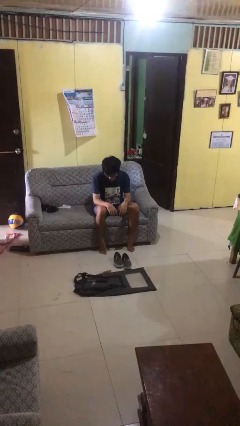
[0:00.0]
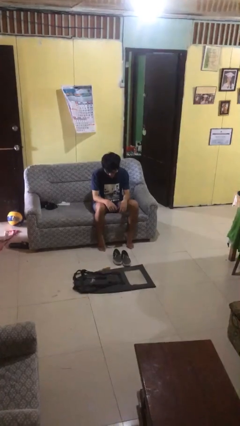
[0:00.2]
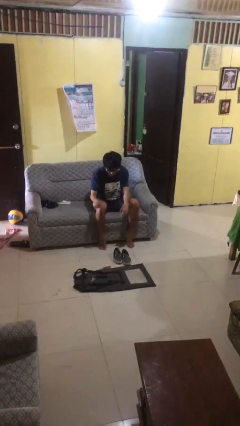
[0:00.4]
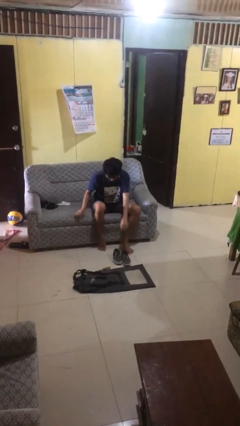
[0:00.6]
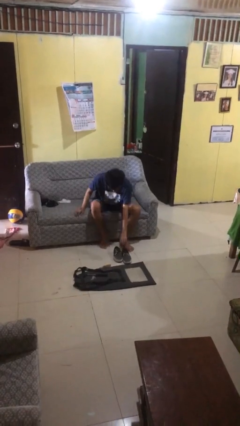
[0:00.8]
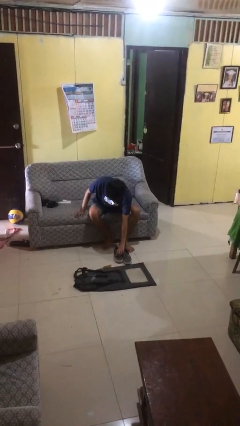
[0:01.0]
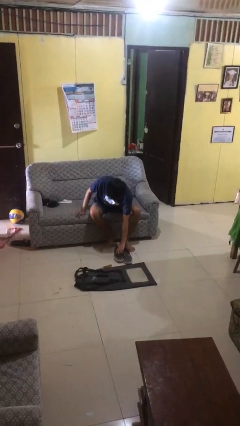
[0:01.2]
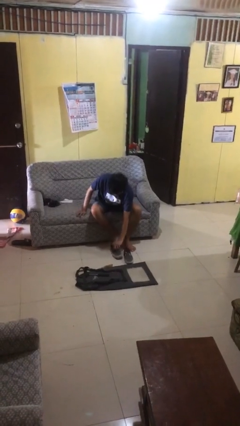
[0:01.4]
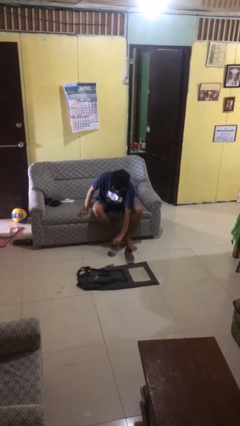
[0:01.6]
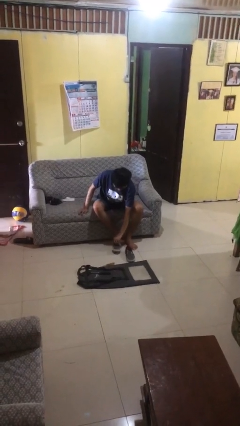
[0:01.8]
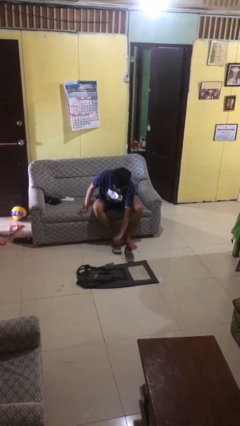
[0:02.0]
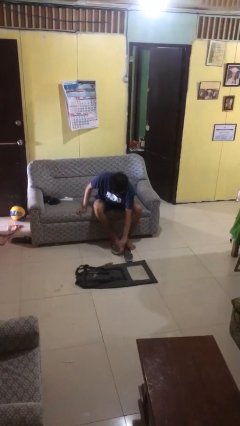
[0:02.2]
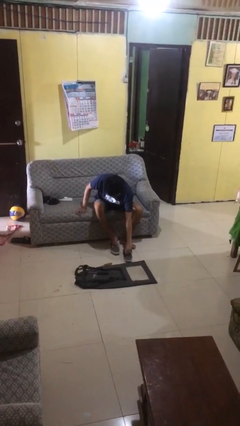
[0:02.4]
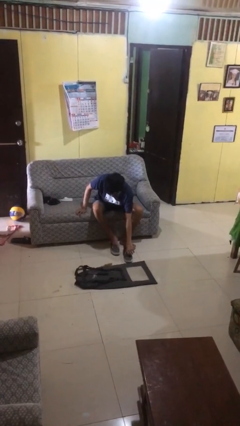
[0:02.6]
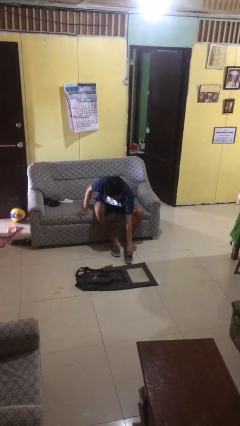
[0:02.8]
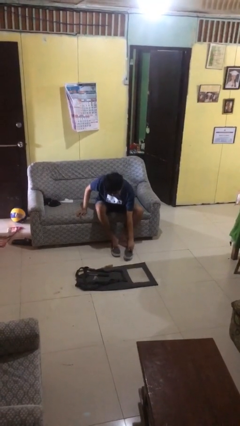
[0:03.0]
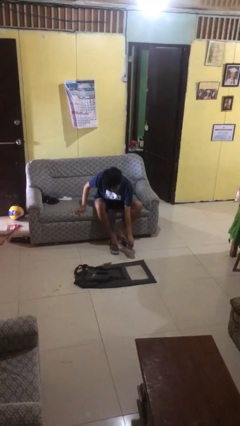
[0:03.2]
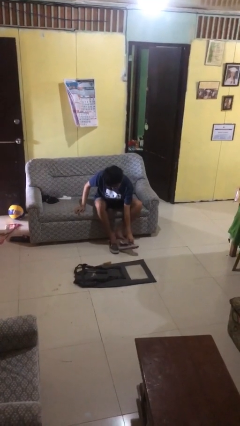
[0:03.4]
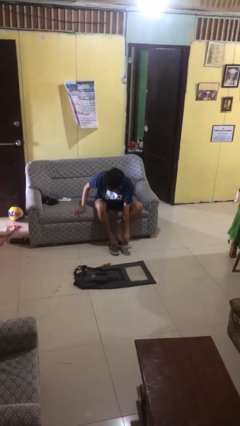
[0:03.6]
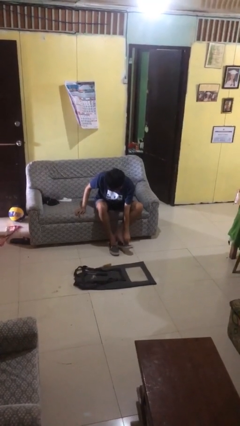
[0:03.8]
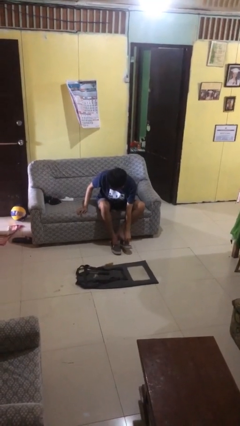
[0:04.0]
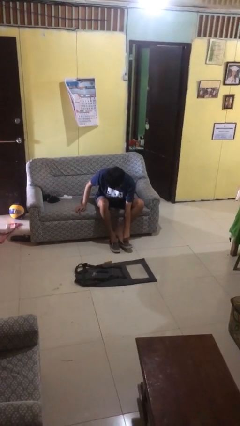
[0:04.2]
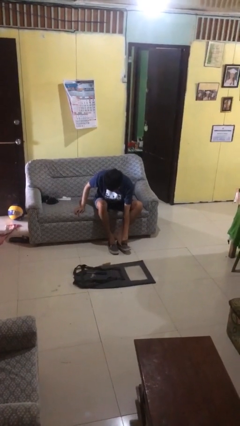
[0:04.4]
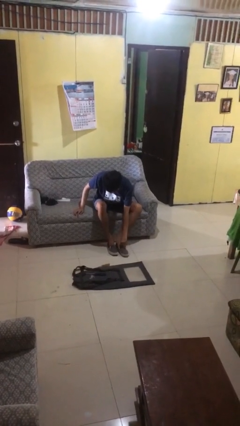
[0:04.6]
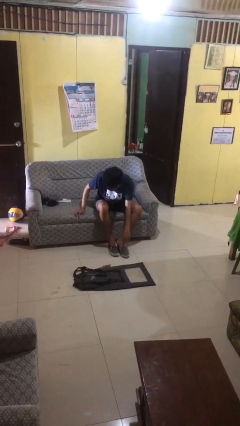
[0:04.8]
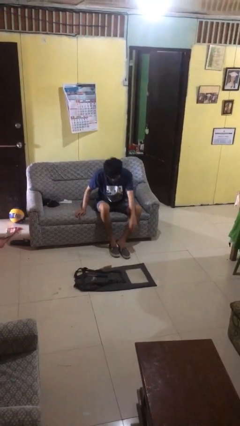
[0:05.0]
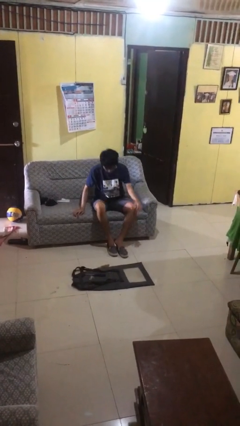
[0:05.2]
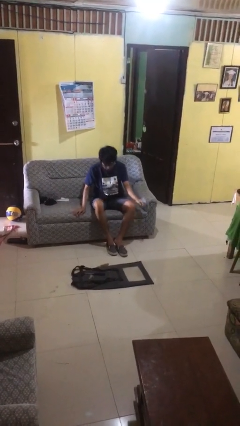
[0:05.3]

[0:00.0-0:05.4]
person puts on shoes

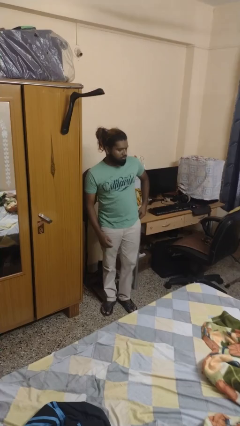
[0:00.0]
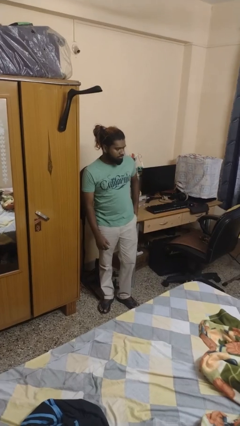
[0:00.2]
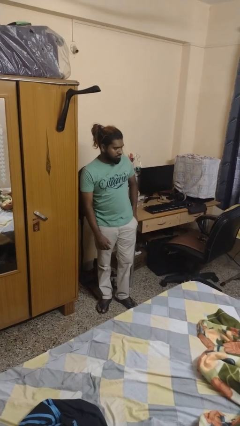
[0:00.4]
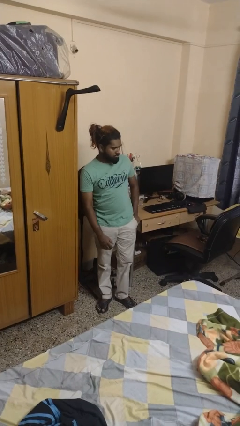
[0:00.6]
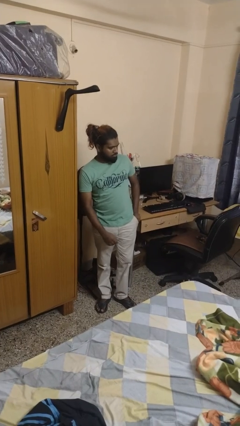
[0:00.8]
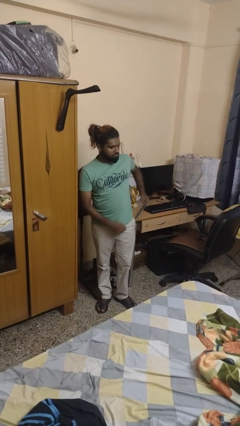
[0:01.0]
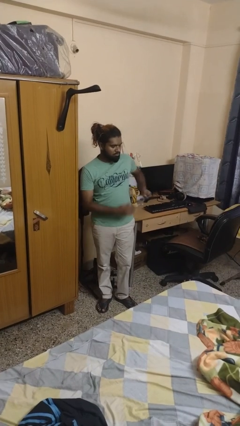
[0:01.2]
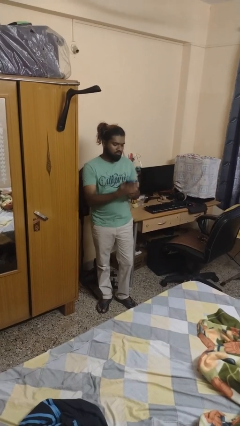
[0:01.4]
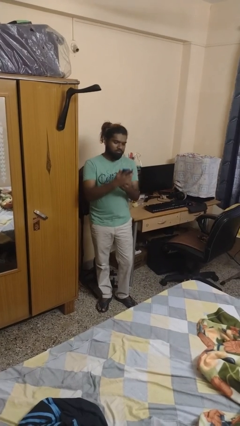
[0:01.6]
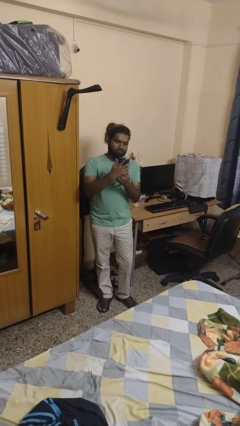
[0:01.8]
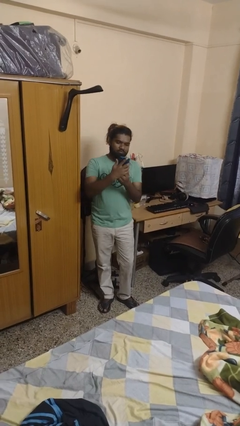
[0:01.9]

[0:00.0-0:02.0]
person takes phone from pocket

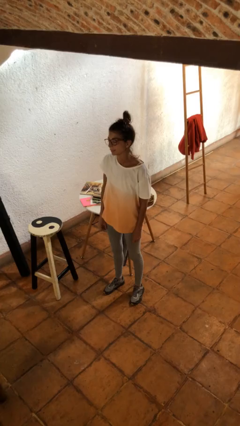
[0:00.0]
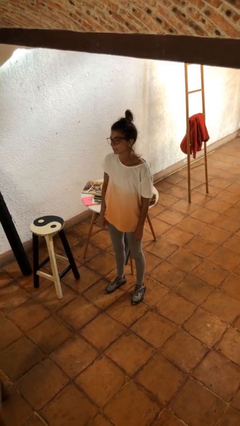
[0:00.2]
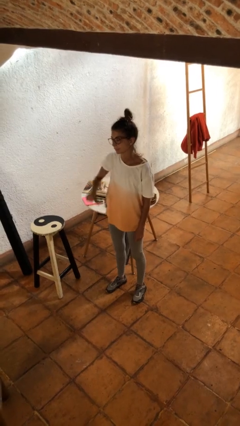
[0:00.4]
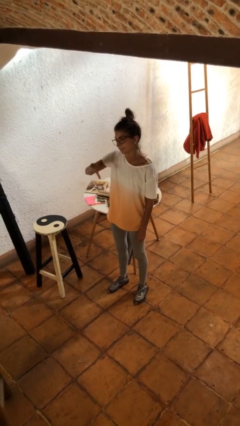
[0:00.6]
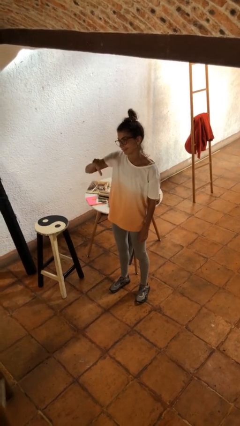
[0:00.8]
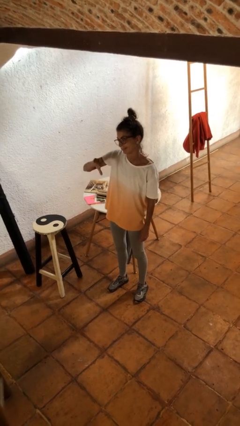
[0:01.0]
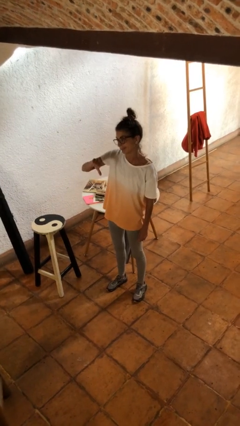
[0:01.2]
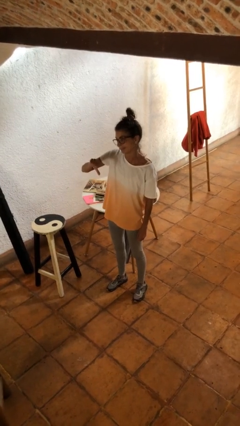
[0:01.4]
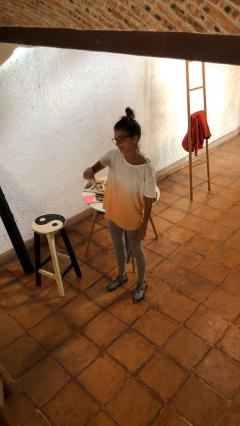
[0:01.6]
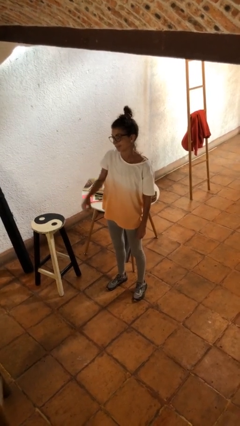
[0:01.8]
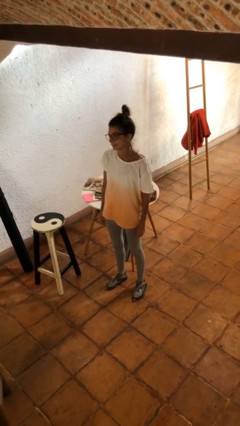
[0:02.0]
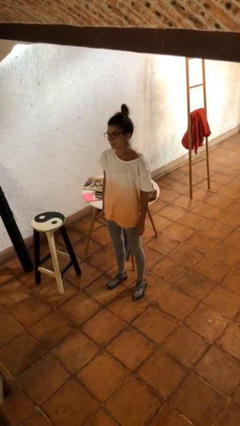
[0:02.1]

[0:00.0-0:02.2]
person gestures thumbs down

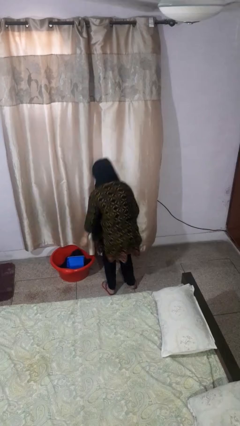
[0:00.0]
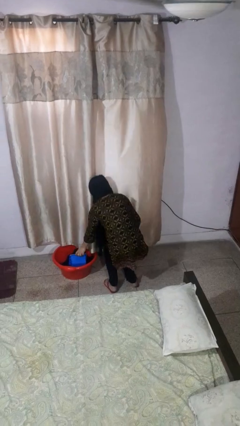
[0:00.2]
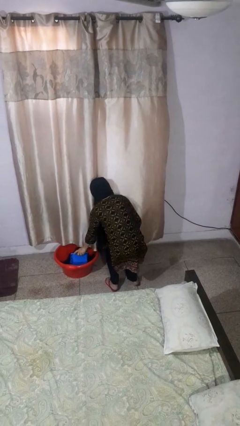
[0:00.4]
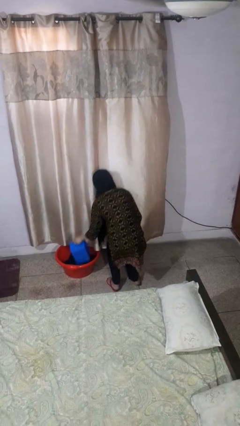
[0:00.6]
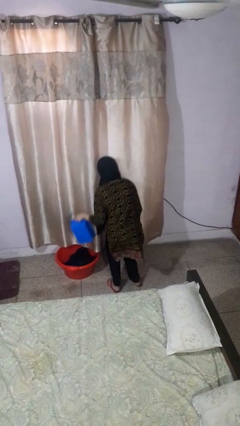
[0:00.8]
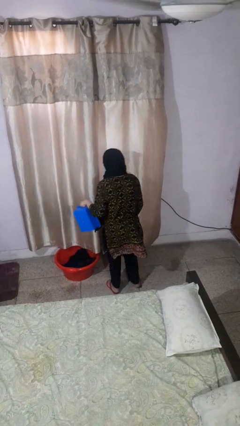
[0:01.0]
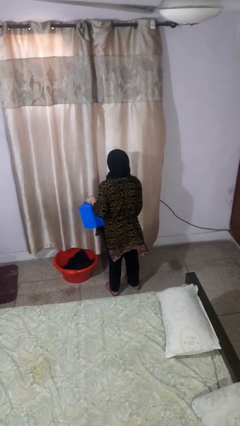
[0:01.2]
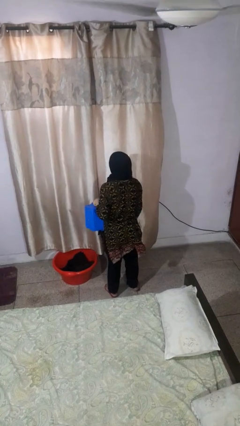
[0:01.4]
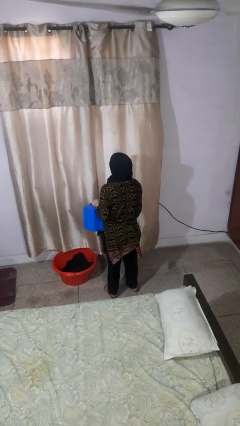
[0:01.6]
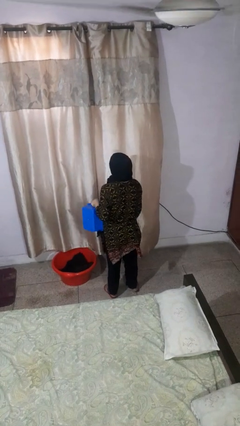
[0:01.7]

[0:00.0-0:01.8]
person takes object from basket

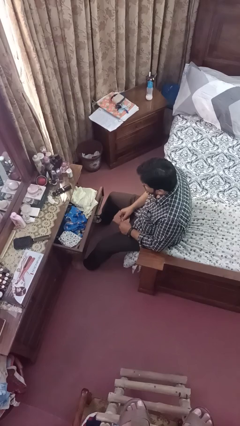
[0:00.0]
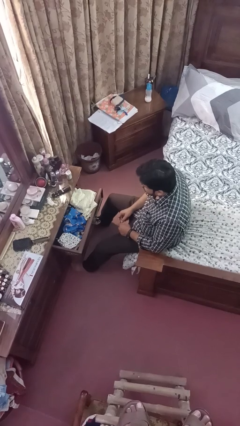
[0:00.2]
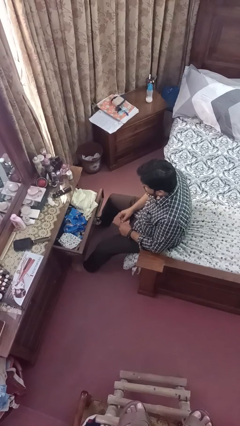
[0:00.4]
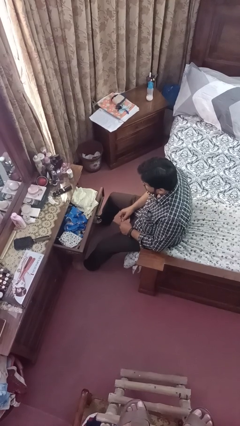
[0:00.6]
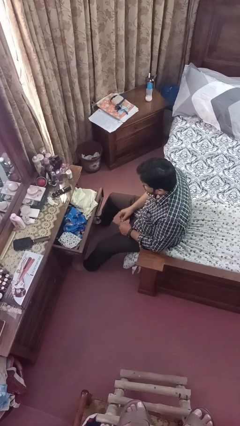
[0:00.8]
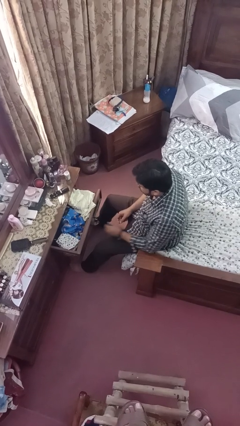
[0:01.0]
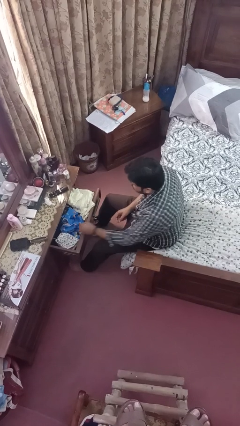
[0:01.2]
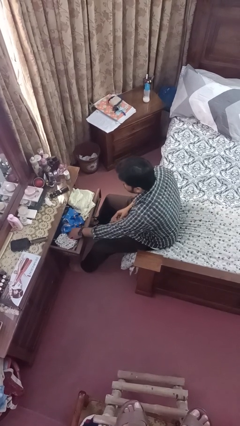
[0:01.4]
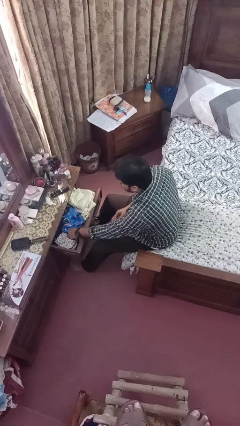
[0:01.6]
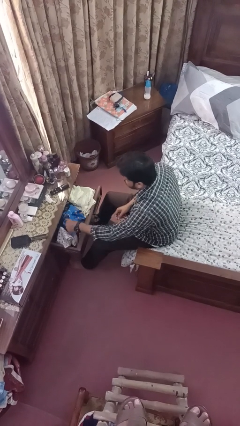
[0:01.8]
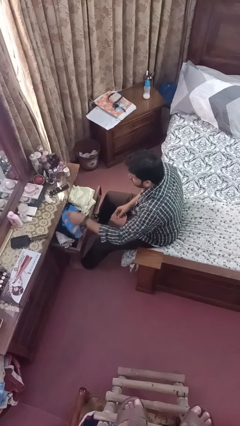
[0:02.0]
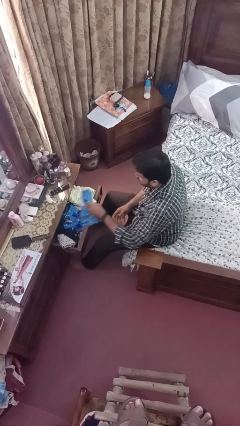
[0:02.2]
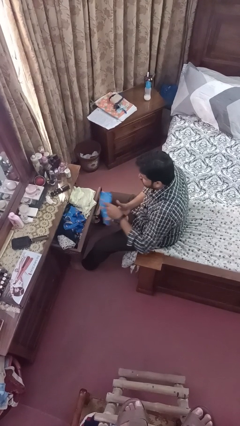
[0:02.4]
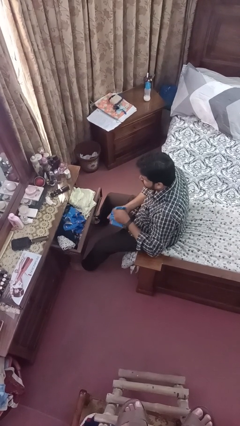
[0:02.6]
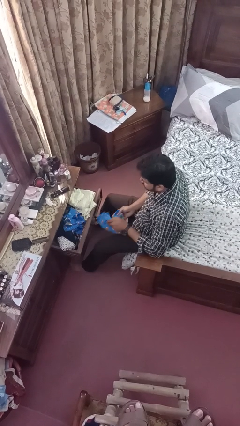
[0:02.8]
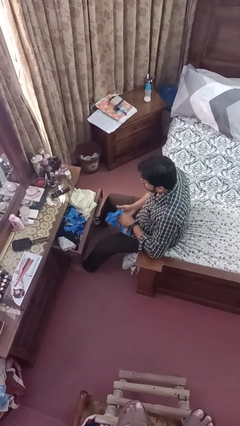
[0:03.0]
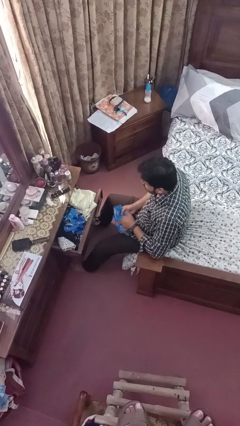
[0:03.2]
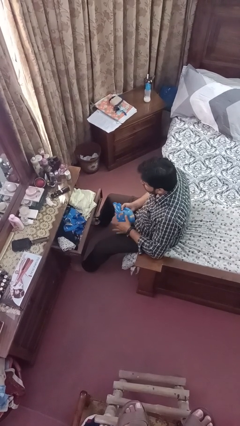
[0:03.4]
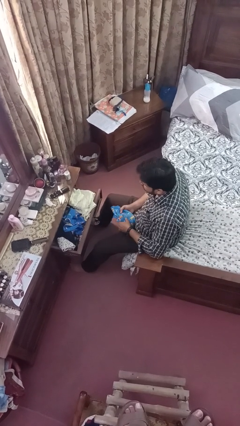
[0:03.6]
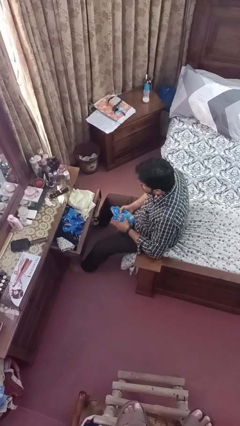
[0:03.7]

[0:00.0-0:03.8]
person takes clothes from dresser

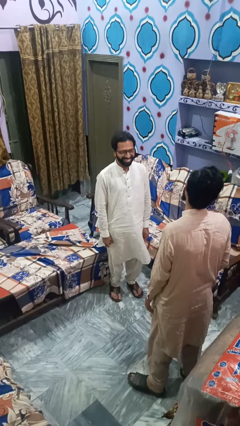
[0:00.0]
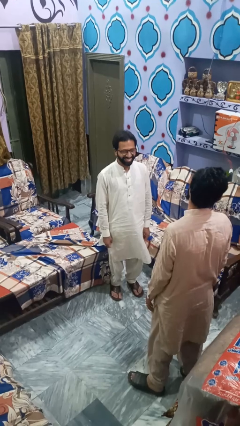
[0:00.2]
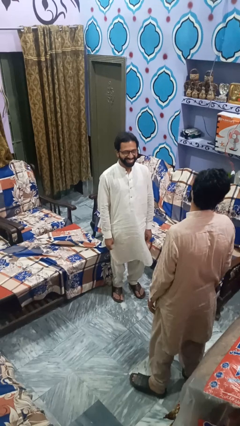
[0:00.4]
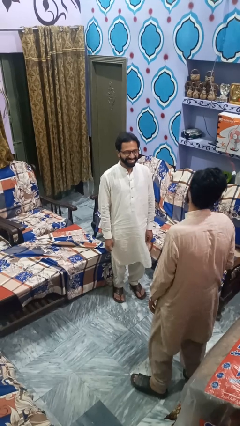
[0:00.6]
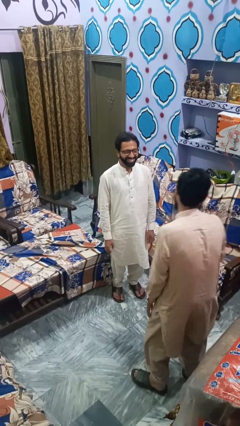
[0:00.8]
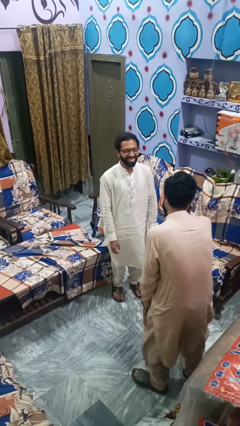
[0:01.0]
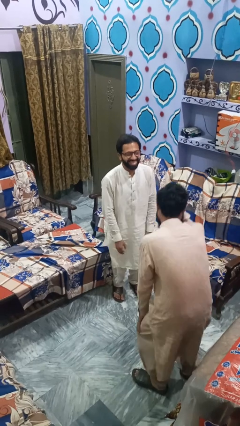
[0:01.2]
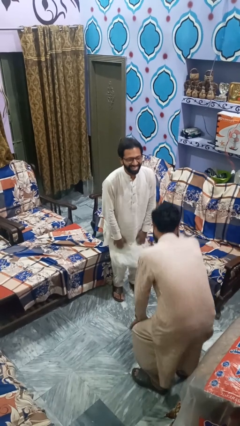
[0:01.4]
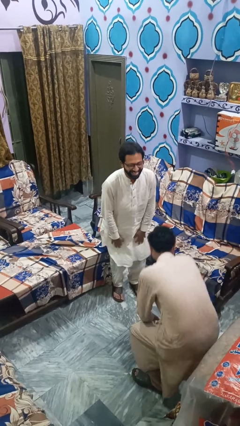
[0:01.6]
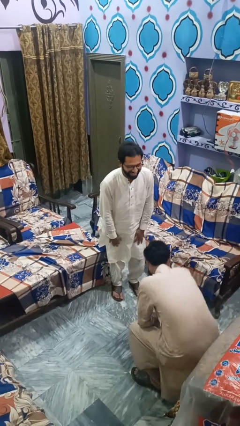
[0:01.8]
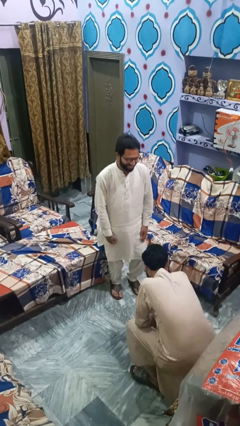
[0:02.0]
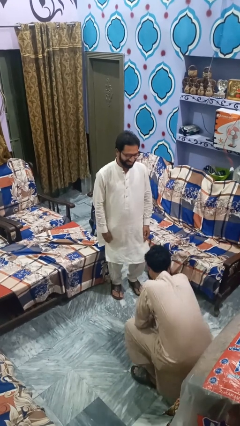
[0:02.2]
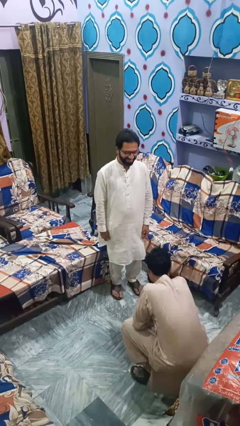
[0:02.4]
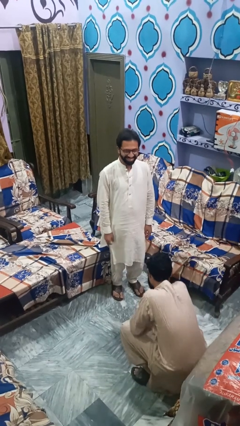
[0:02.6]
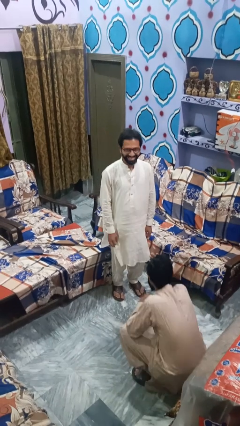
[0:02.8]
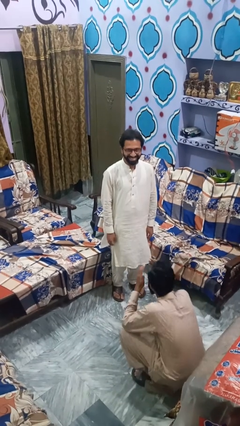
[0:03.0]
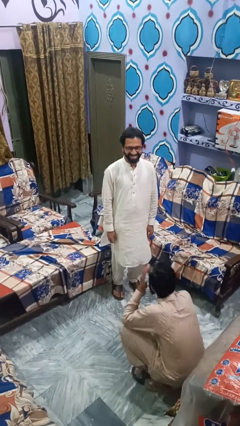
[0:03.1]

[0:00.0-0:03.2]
person laughs with person
